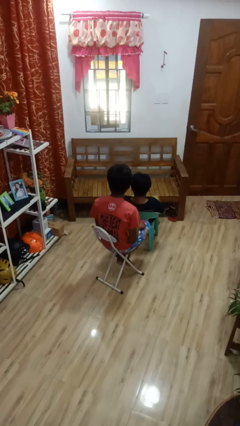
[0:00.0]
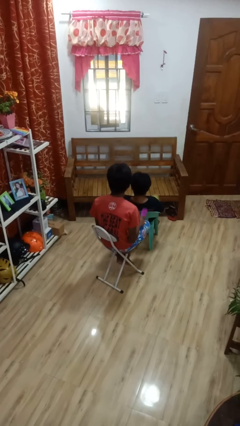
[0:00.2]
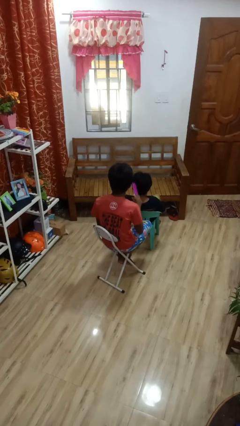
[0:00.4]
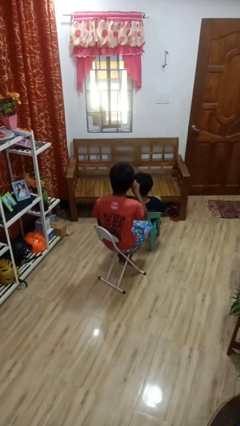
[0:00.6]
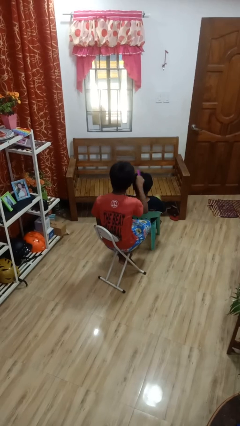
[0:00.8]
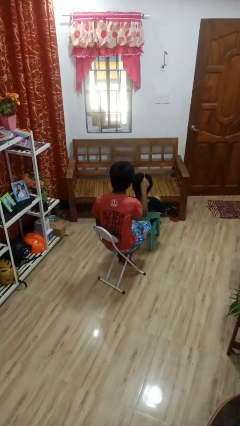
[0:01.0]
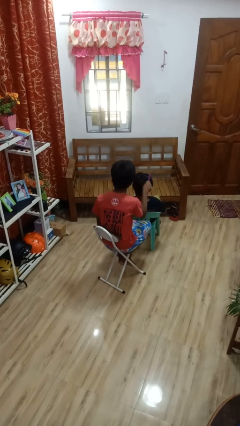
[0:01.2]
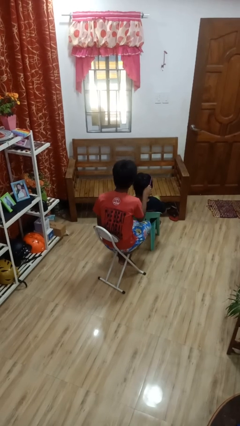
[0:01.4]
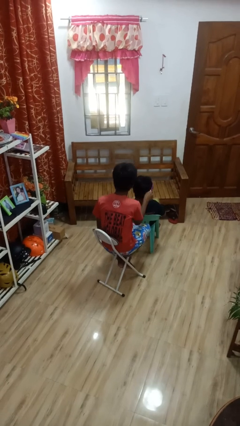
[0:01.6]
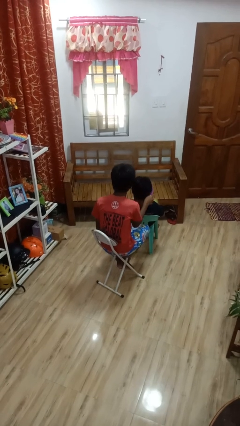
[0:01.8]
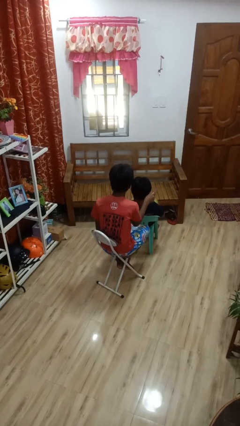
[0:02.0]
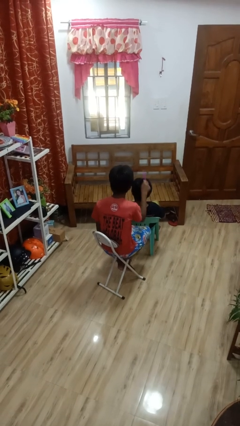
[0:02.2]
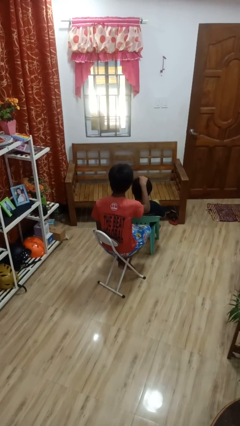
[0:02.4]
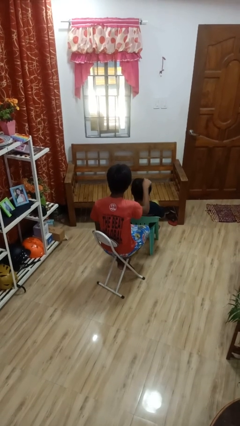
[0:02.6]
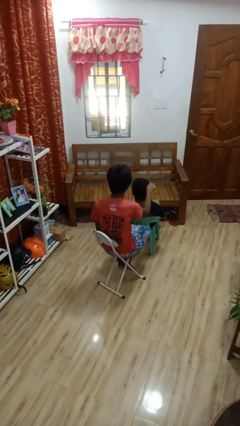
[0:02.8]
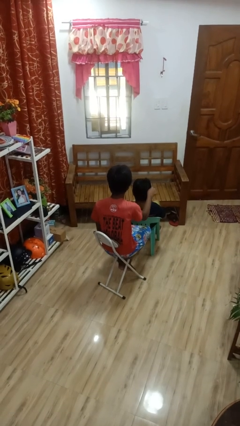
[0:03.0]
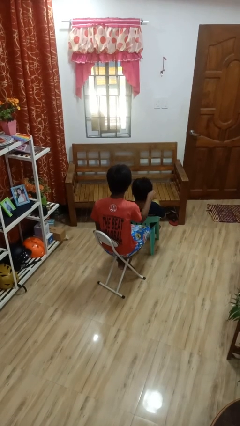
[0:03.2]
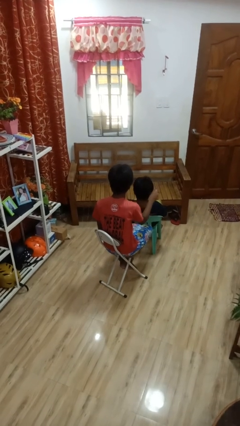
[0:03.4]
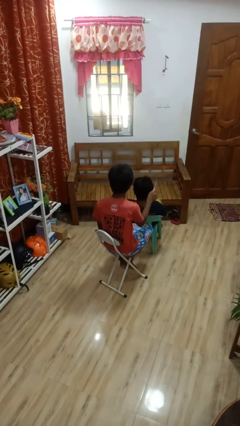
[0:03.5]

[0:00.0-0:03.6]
person brushes hair of person

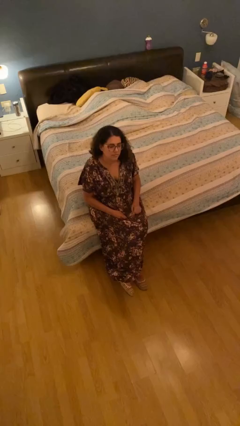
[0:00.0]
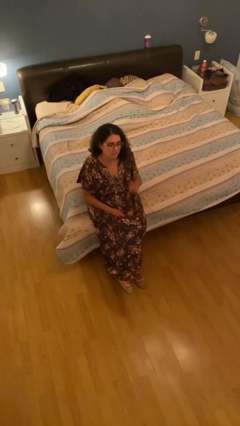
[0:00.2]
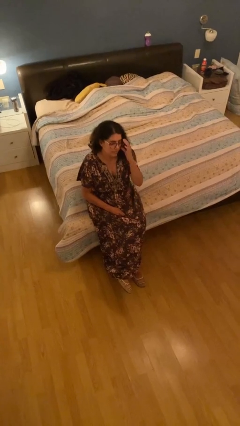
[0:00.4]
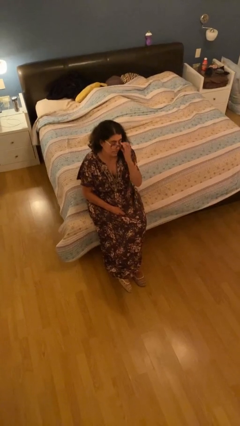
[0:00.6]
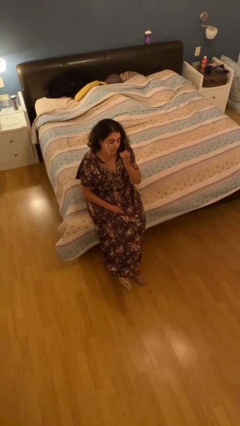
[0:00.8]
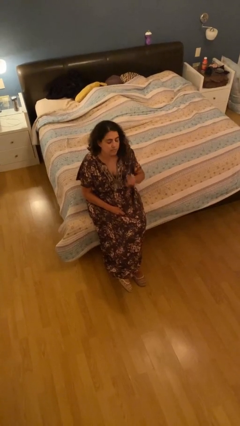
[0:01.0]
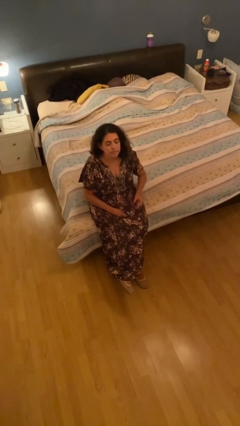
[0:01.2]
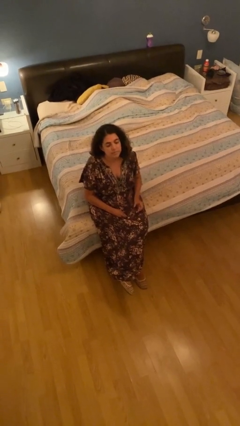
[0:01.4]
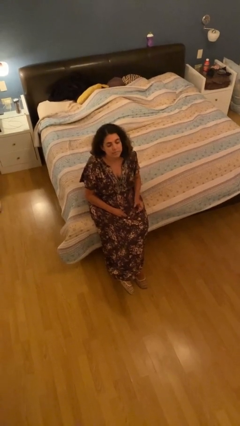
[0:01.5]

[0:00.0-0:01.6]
person takes off glasses

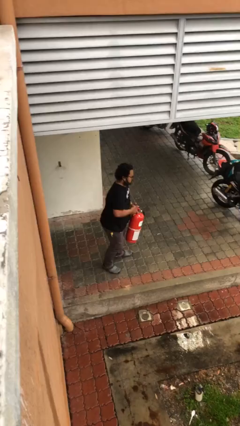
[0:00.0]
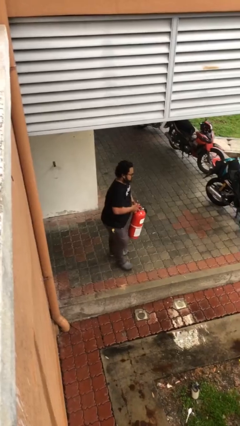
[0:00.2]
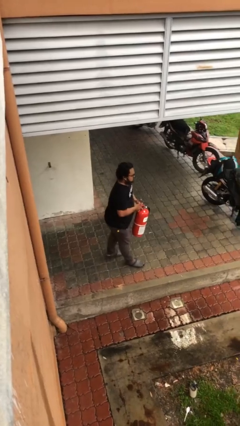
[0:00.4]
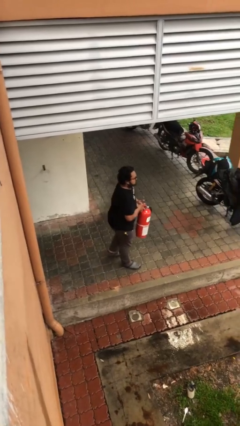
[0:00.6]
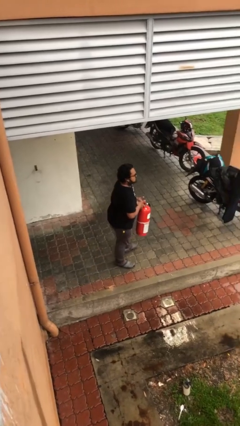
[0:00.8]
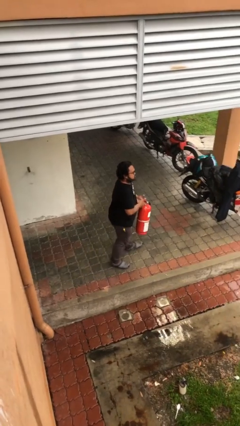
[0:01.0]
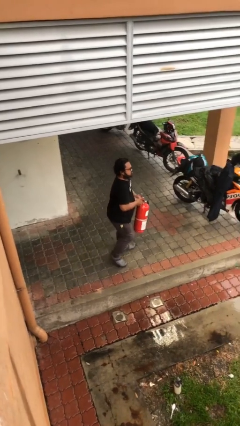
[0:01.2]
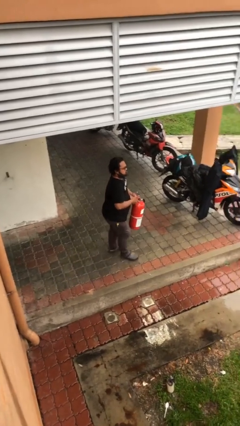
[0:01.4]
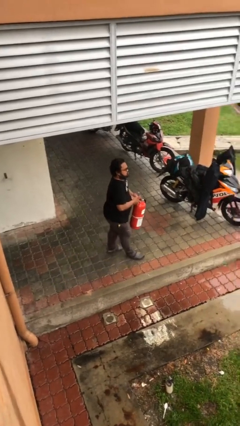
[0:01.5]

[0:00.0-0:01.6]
person carries heavy object

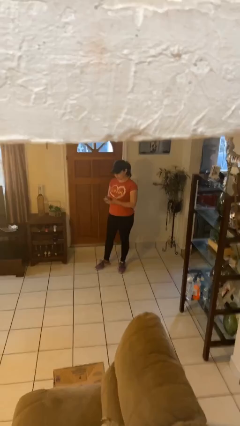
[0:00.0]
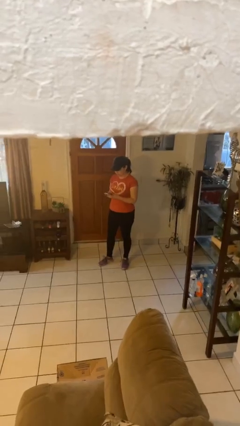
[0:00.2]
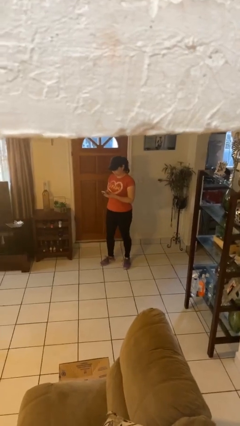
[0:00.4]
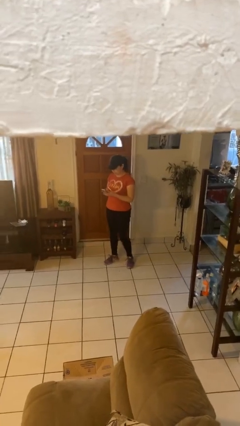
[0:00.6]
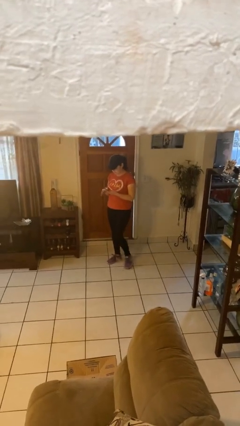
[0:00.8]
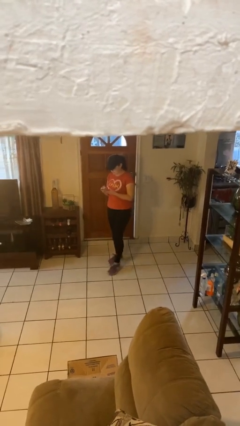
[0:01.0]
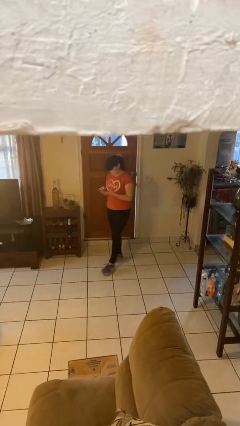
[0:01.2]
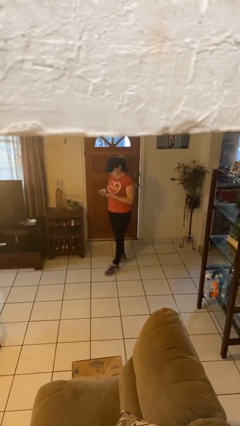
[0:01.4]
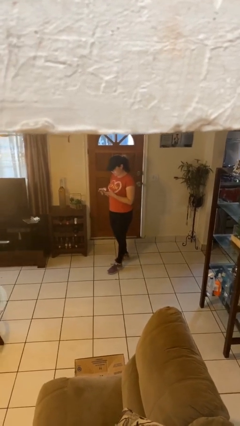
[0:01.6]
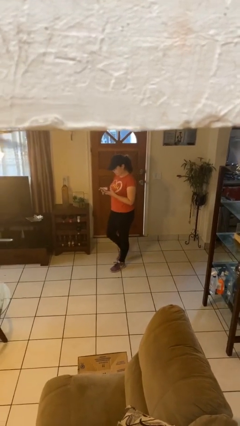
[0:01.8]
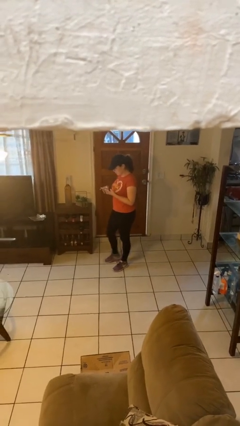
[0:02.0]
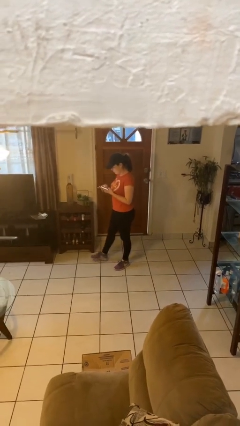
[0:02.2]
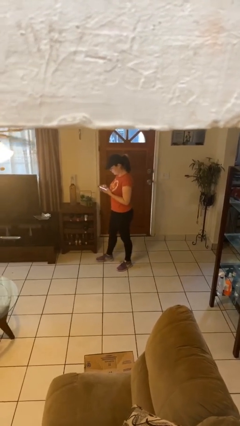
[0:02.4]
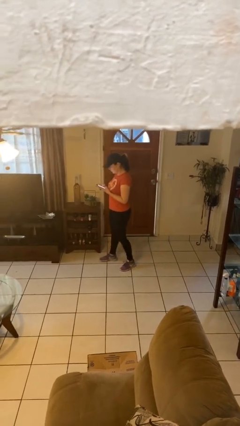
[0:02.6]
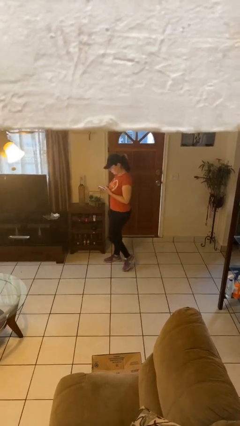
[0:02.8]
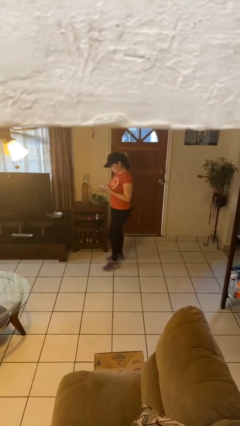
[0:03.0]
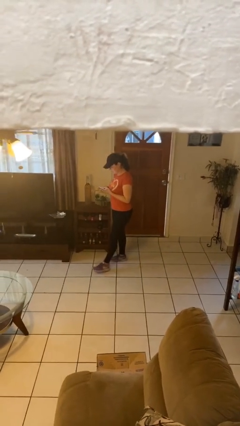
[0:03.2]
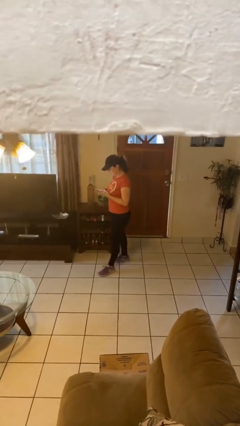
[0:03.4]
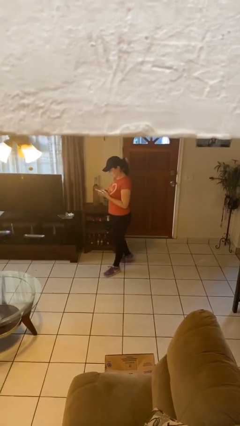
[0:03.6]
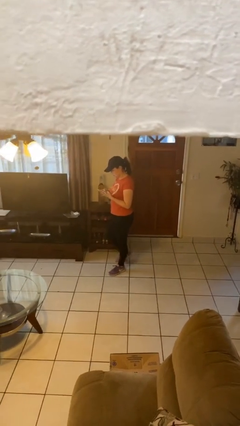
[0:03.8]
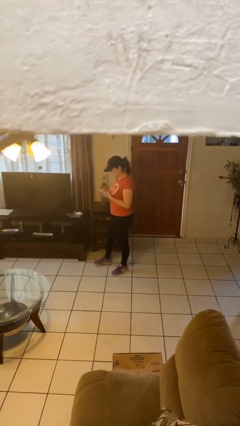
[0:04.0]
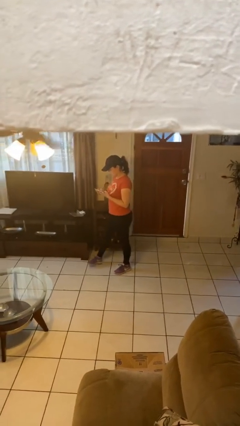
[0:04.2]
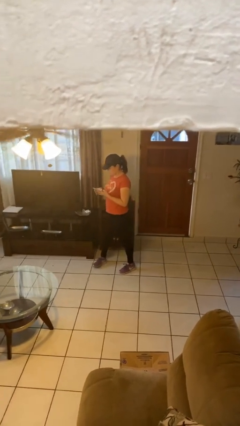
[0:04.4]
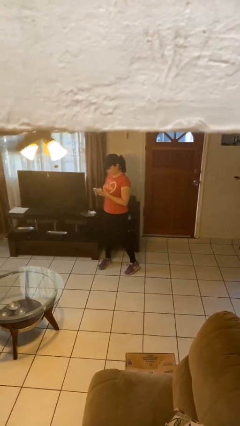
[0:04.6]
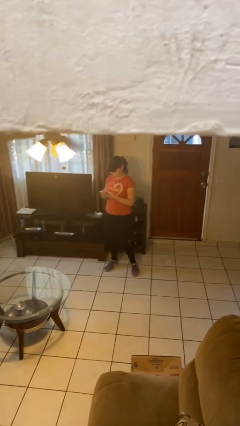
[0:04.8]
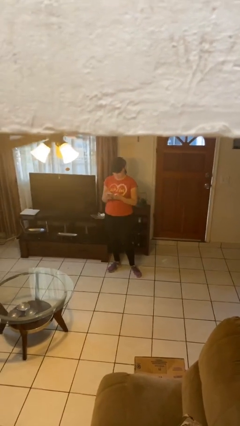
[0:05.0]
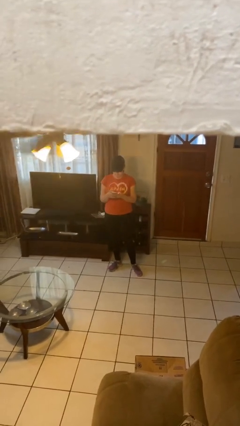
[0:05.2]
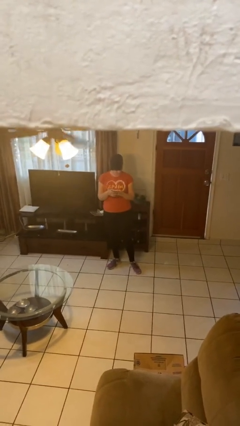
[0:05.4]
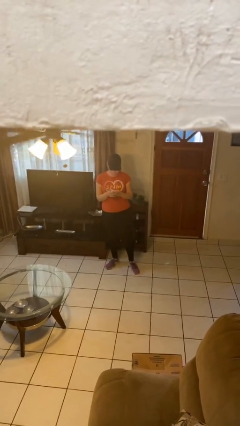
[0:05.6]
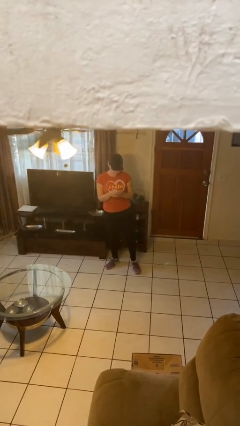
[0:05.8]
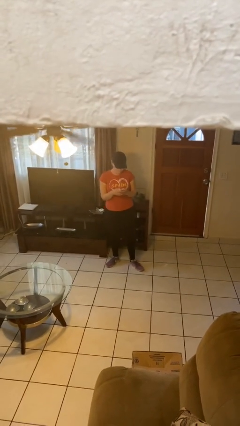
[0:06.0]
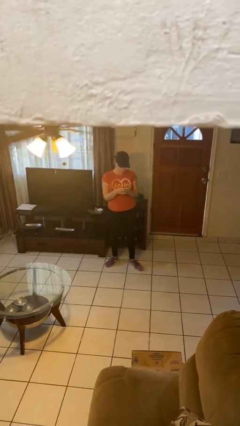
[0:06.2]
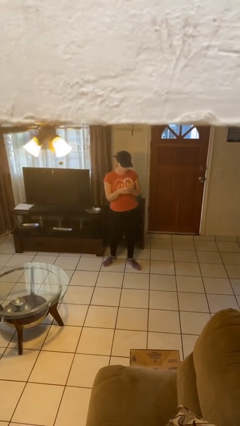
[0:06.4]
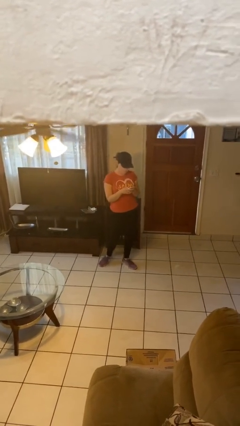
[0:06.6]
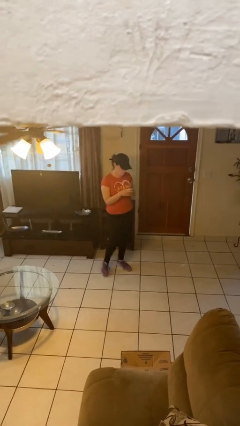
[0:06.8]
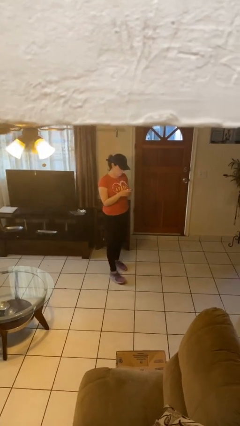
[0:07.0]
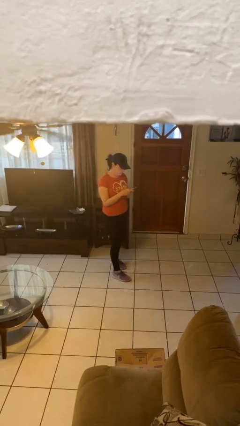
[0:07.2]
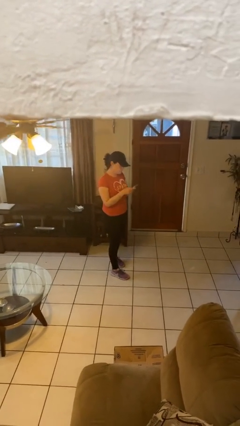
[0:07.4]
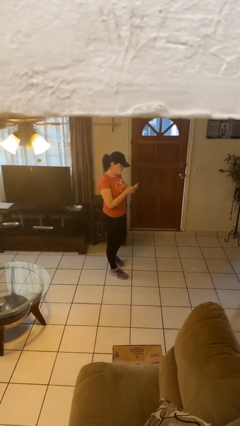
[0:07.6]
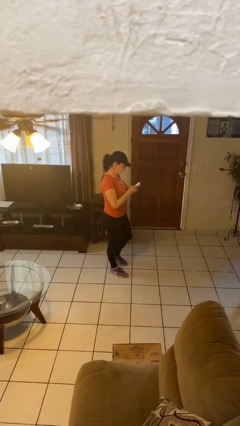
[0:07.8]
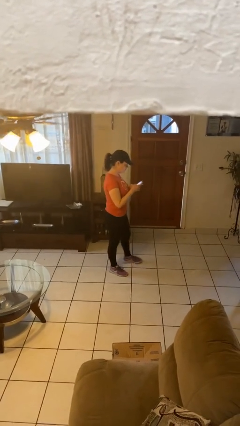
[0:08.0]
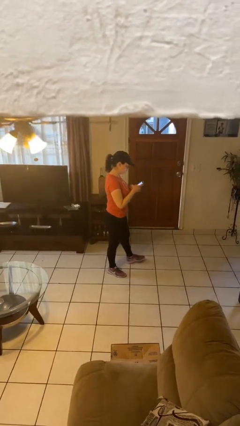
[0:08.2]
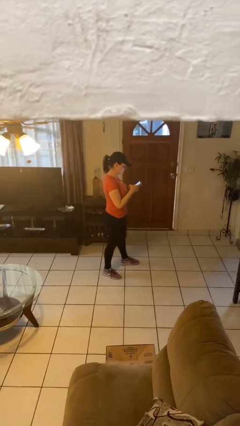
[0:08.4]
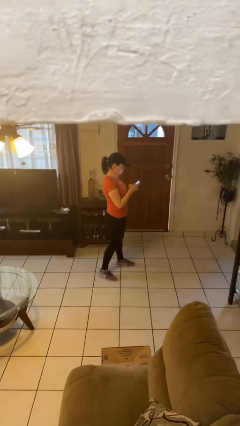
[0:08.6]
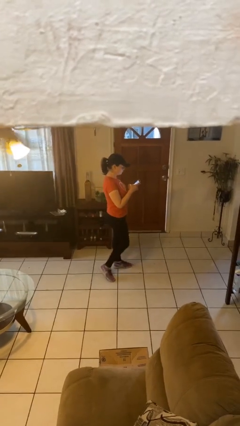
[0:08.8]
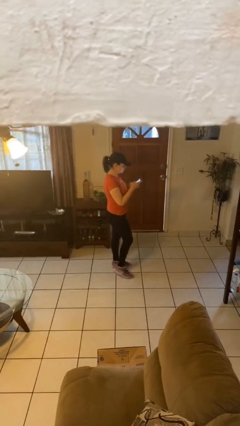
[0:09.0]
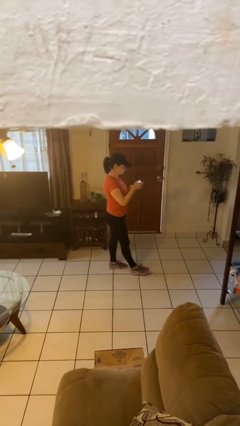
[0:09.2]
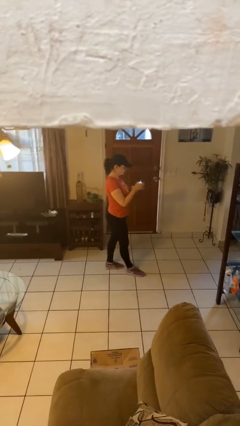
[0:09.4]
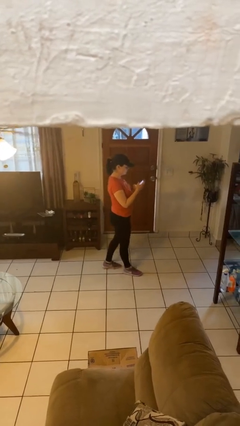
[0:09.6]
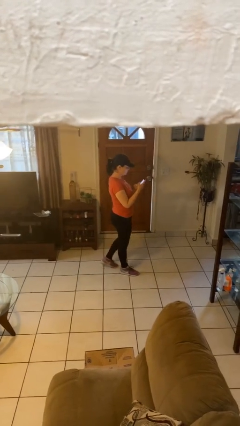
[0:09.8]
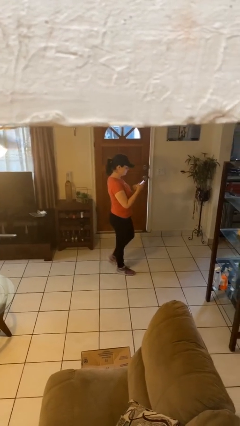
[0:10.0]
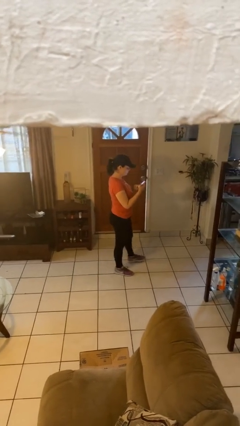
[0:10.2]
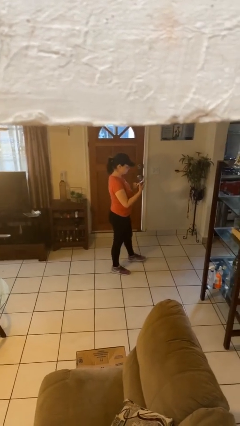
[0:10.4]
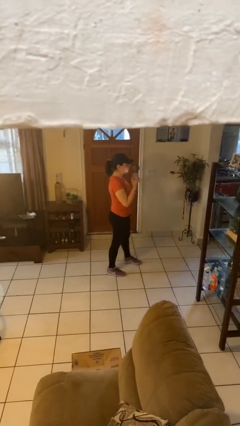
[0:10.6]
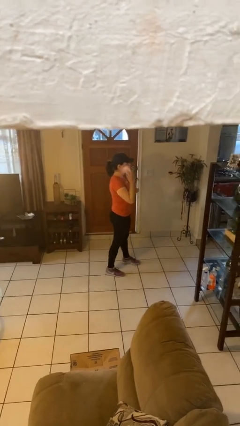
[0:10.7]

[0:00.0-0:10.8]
person texts on phone

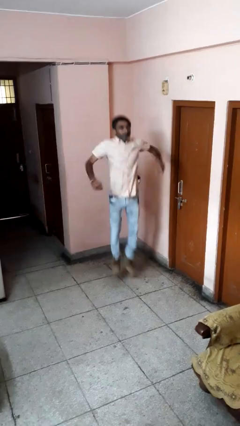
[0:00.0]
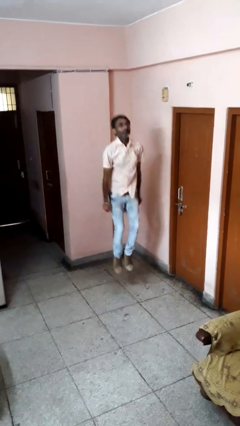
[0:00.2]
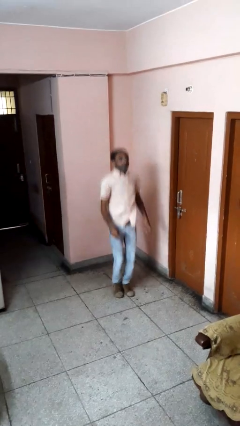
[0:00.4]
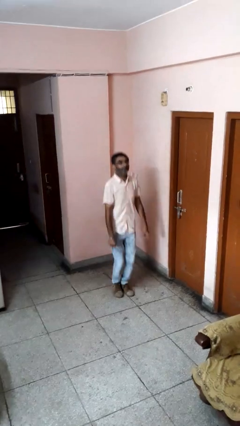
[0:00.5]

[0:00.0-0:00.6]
person jumps
